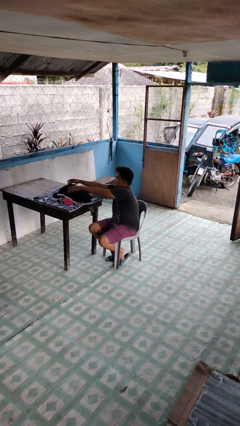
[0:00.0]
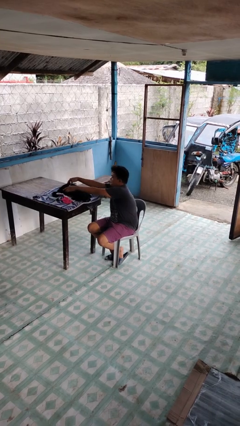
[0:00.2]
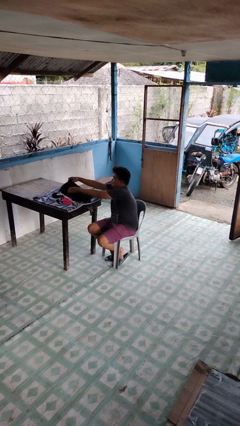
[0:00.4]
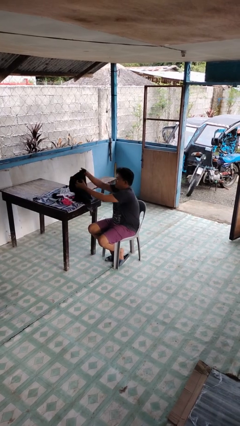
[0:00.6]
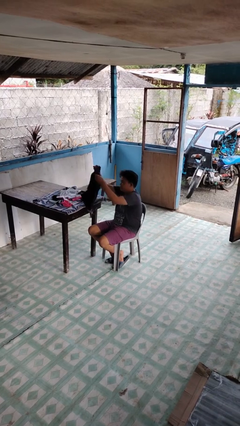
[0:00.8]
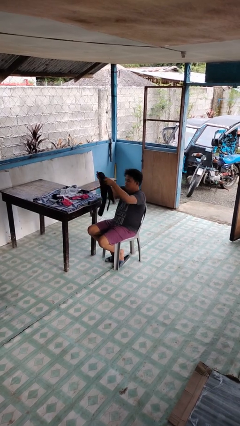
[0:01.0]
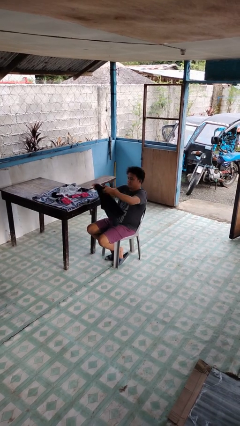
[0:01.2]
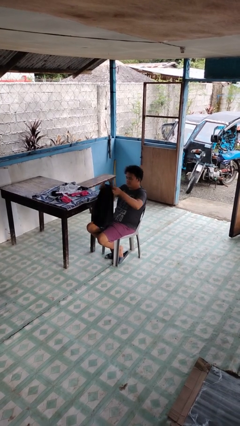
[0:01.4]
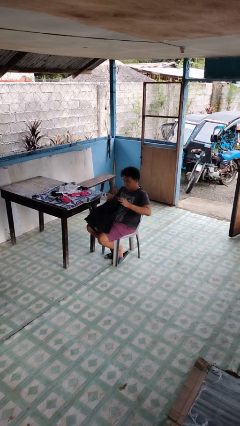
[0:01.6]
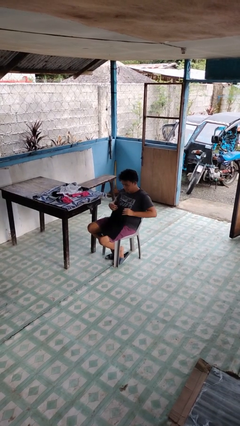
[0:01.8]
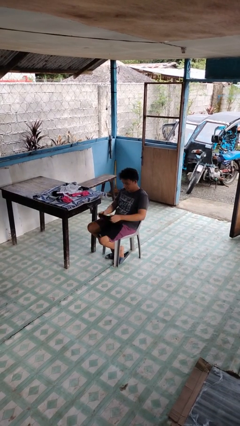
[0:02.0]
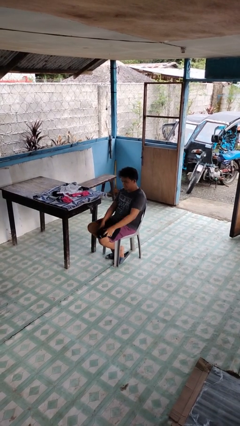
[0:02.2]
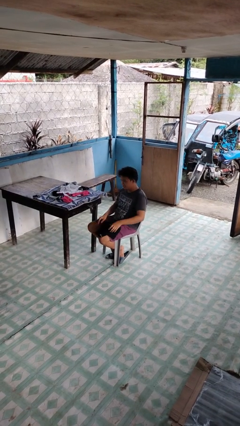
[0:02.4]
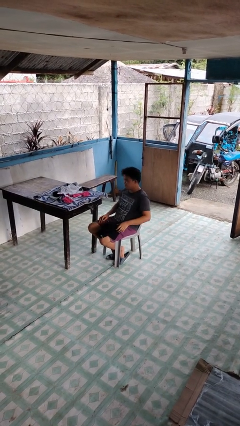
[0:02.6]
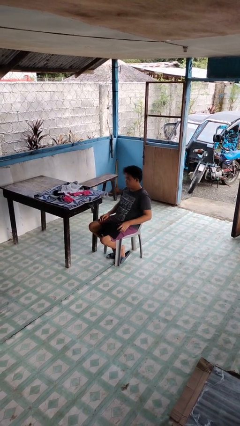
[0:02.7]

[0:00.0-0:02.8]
person folds pants

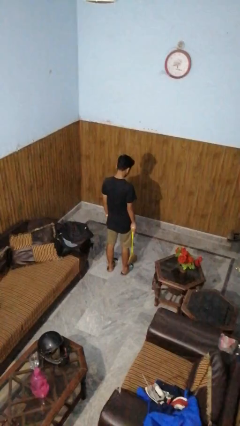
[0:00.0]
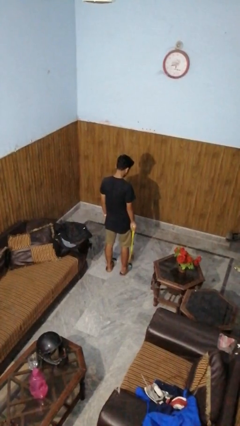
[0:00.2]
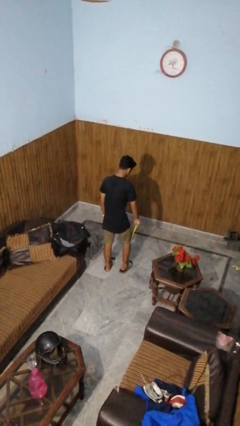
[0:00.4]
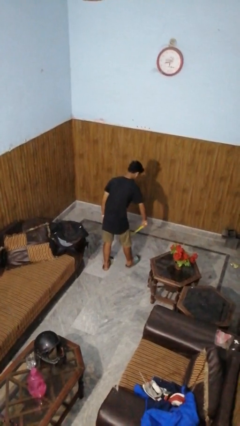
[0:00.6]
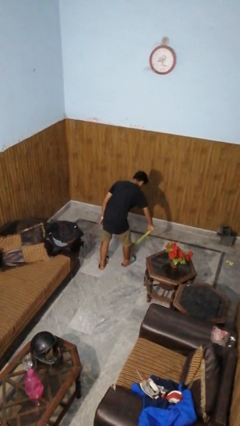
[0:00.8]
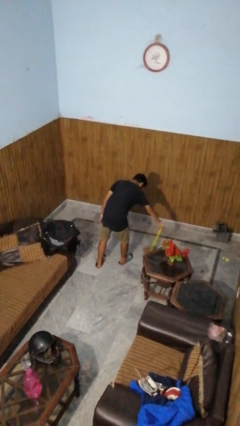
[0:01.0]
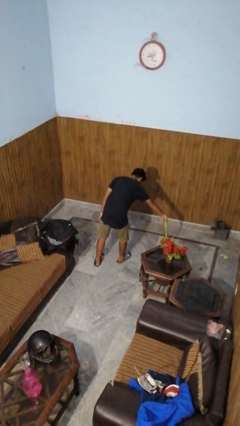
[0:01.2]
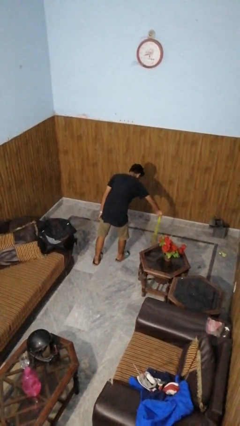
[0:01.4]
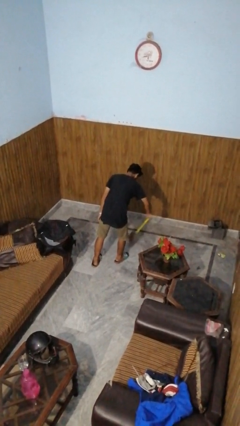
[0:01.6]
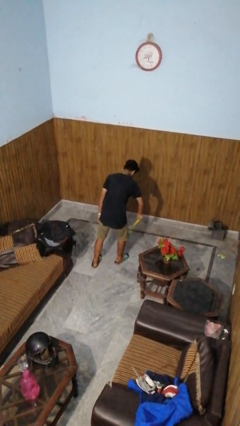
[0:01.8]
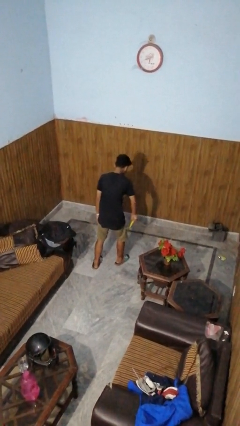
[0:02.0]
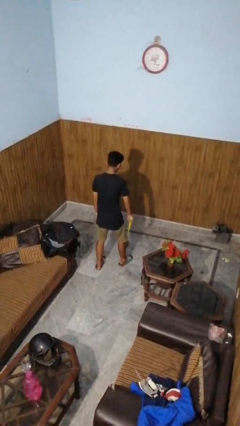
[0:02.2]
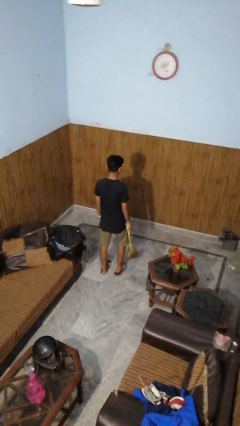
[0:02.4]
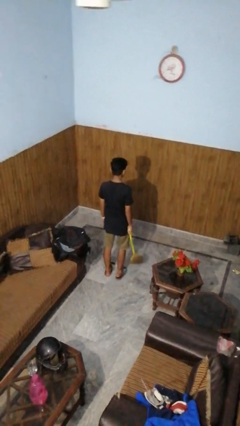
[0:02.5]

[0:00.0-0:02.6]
person sweeps floor

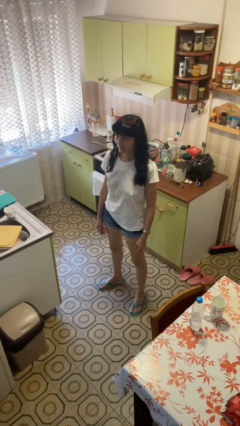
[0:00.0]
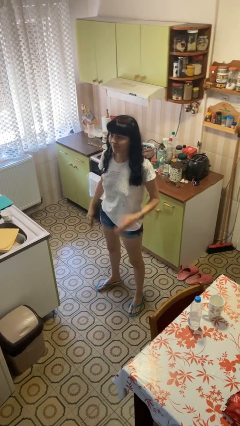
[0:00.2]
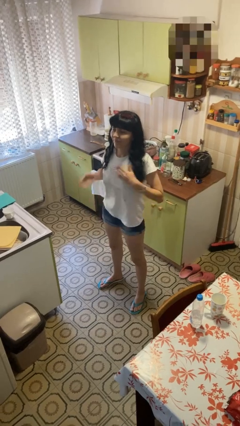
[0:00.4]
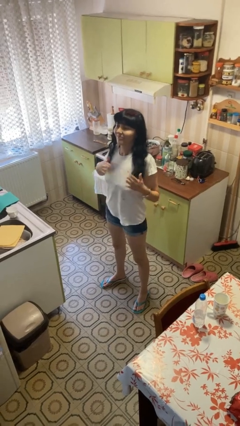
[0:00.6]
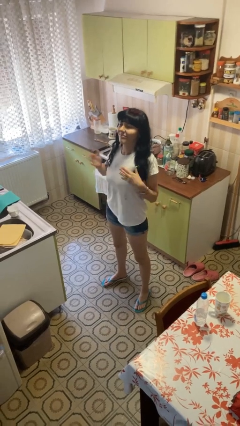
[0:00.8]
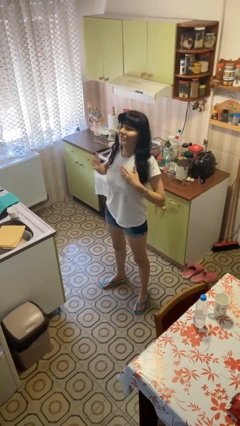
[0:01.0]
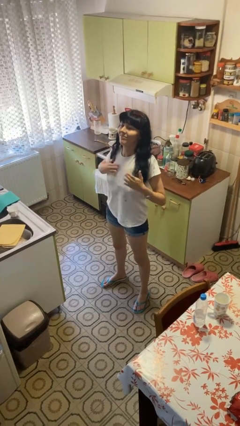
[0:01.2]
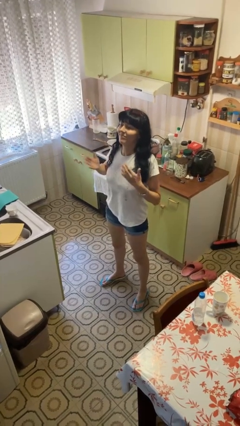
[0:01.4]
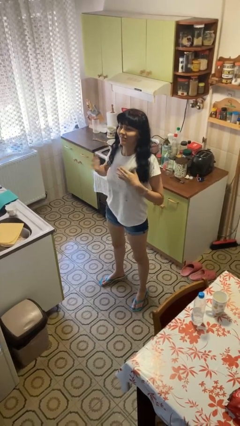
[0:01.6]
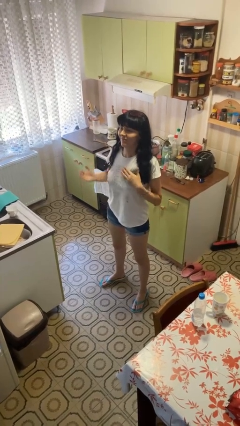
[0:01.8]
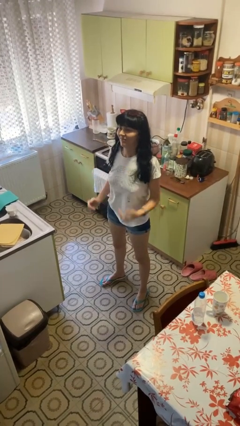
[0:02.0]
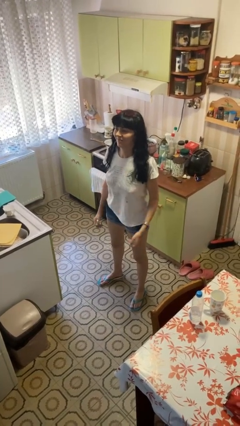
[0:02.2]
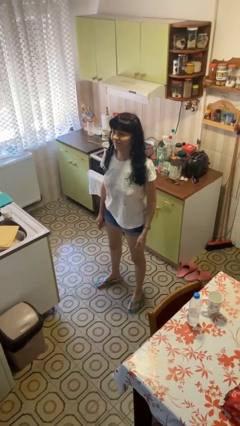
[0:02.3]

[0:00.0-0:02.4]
person drums on chest

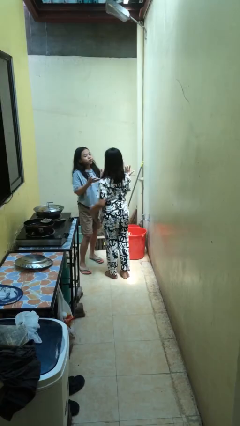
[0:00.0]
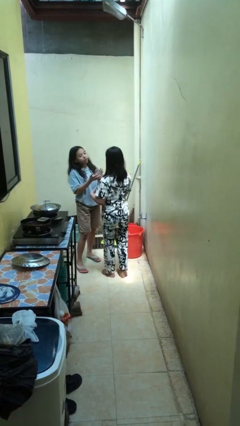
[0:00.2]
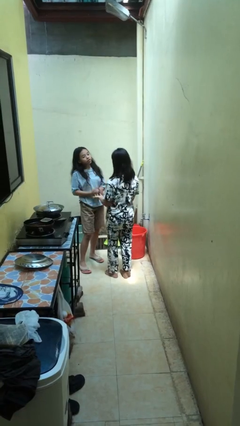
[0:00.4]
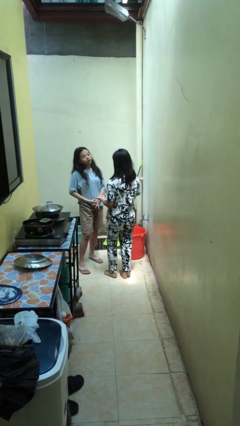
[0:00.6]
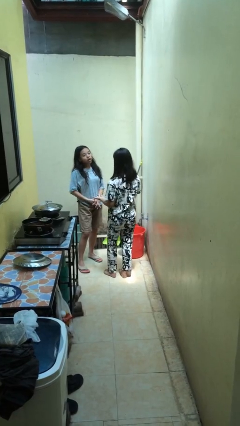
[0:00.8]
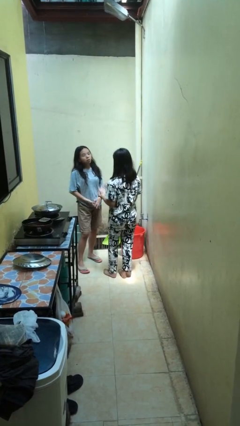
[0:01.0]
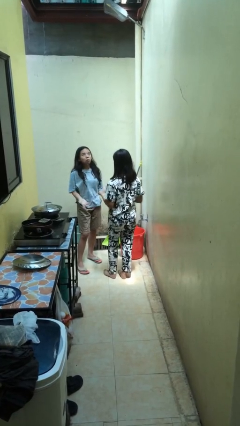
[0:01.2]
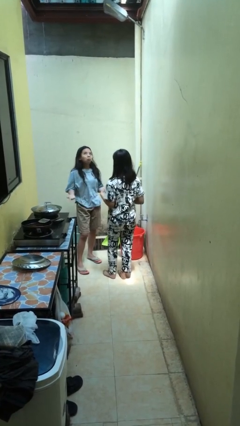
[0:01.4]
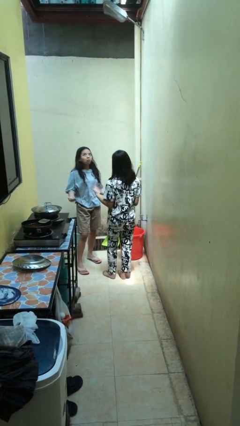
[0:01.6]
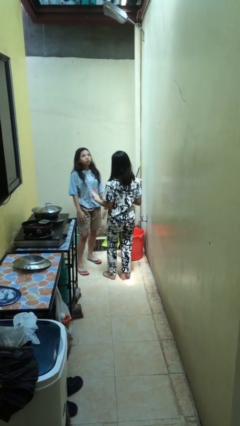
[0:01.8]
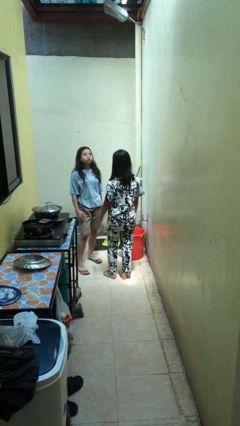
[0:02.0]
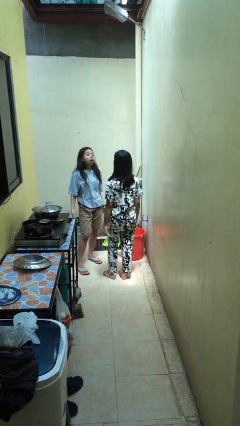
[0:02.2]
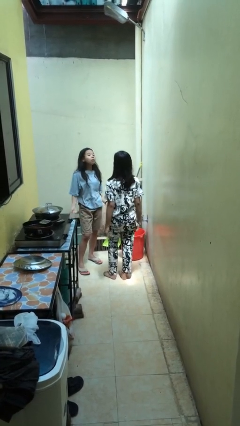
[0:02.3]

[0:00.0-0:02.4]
person talks to person

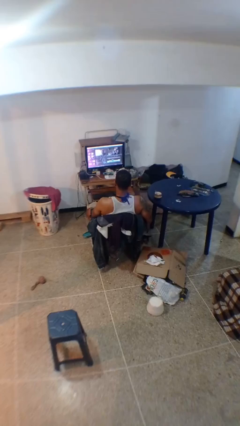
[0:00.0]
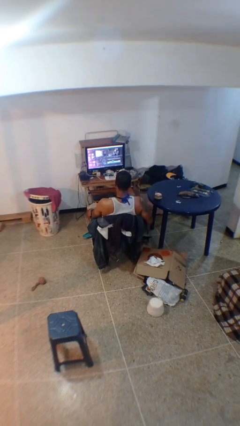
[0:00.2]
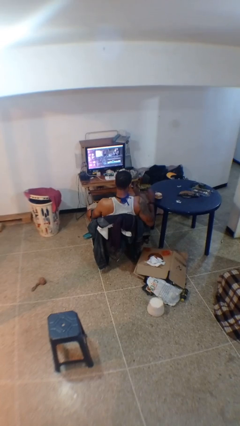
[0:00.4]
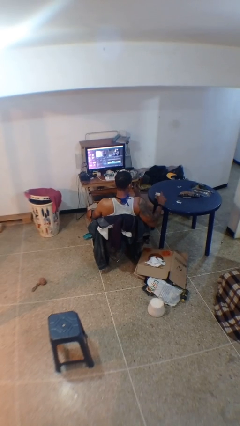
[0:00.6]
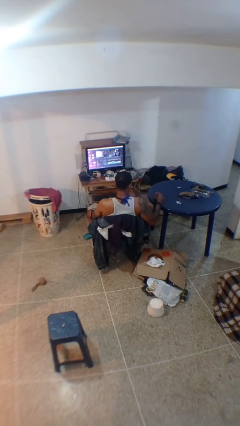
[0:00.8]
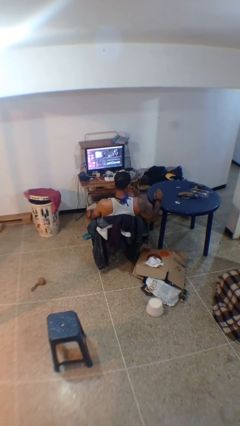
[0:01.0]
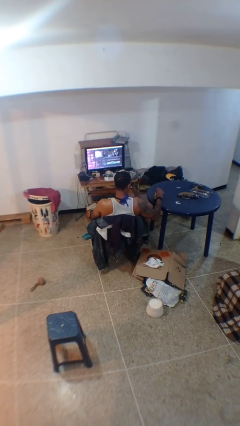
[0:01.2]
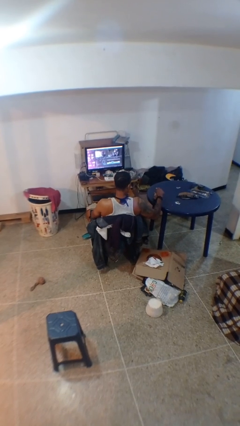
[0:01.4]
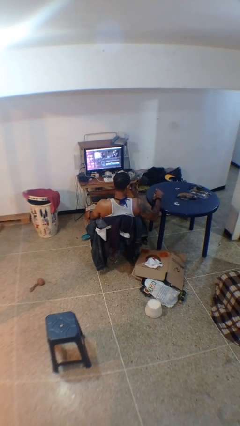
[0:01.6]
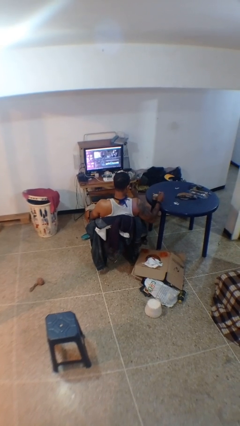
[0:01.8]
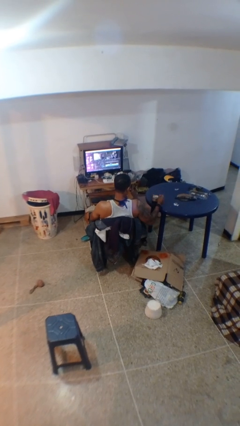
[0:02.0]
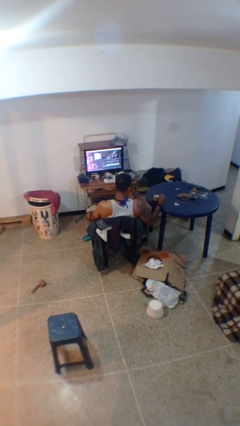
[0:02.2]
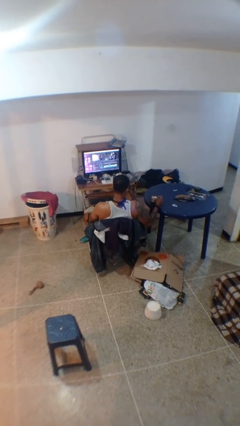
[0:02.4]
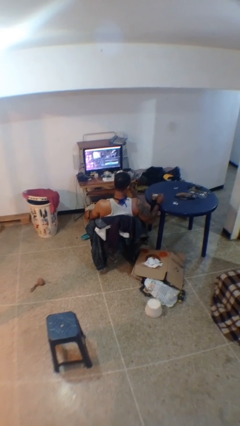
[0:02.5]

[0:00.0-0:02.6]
person stirs mug

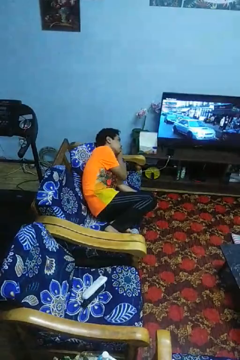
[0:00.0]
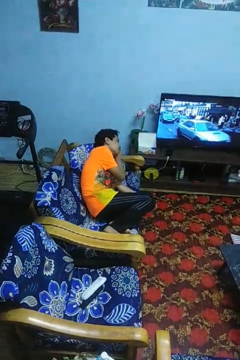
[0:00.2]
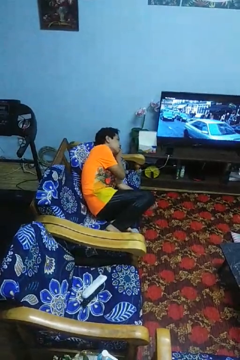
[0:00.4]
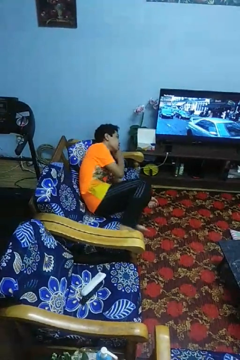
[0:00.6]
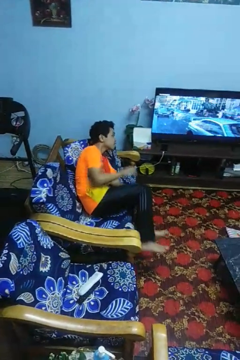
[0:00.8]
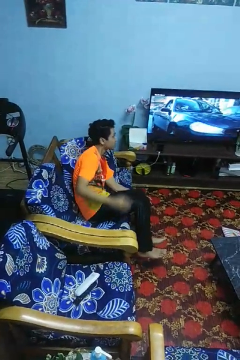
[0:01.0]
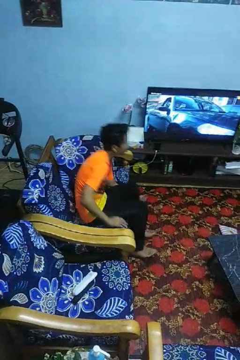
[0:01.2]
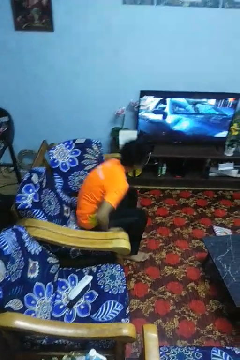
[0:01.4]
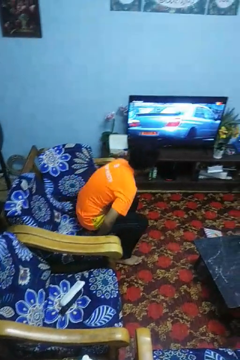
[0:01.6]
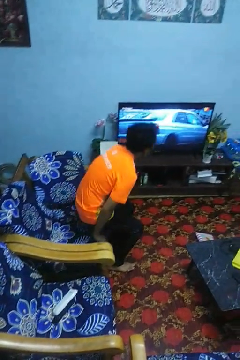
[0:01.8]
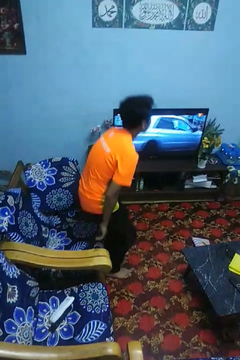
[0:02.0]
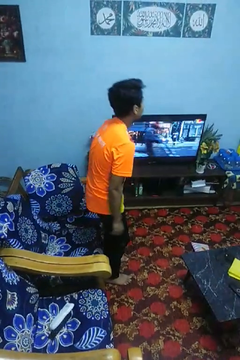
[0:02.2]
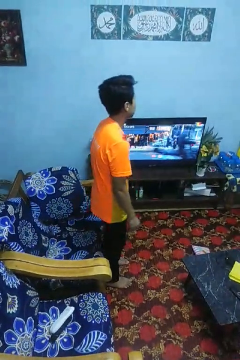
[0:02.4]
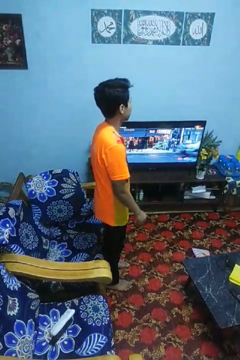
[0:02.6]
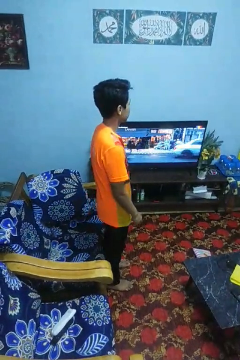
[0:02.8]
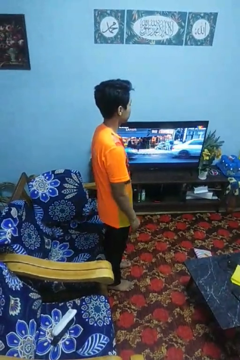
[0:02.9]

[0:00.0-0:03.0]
person stands up

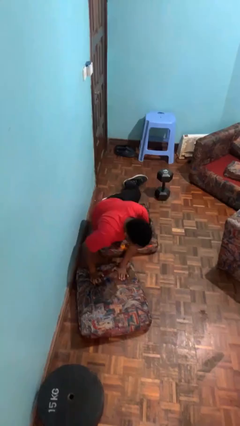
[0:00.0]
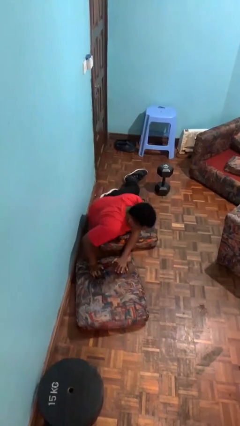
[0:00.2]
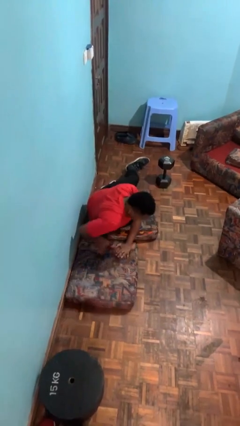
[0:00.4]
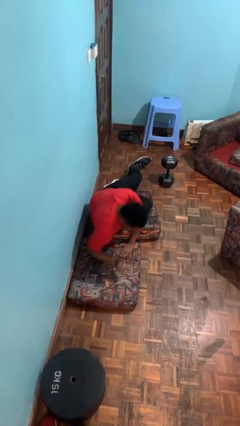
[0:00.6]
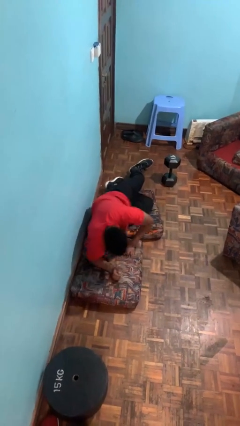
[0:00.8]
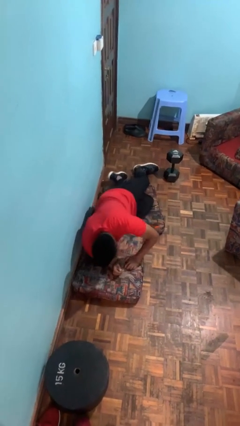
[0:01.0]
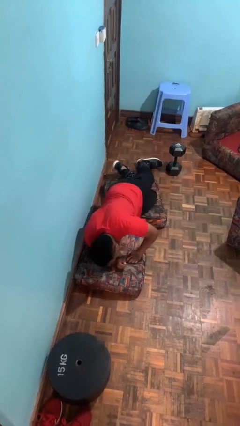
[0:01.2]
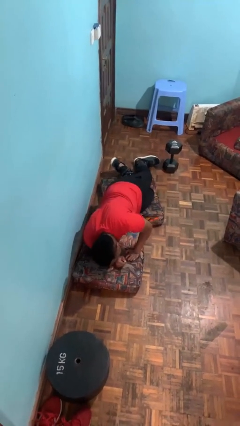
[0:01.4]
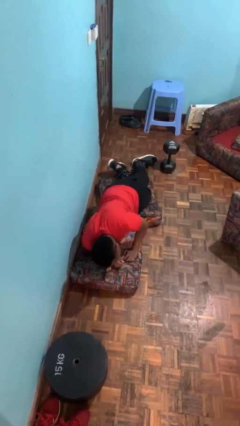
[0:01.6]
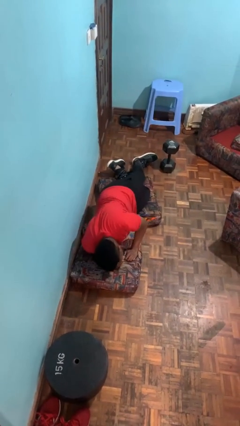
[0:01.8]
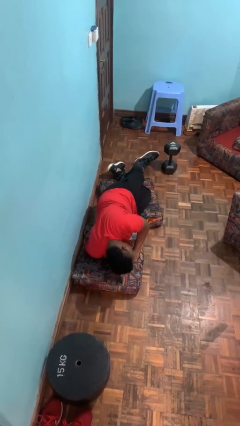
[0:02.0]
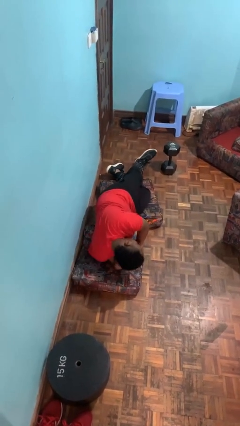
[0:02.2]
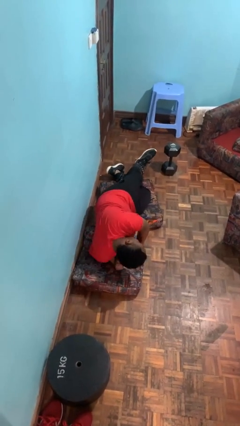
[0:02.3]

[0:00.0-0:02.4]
person lies down on floor
